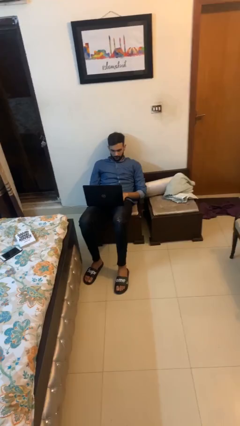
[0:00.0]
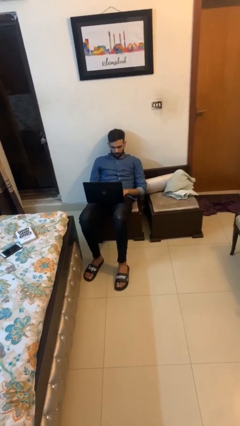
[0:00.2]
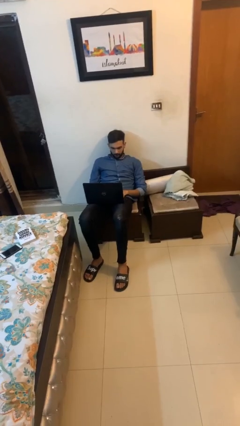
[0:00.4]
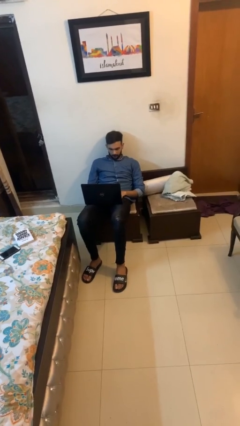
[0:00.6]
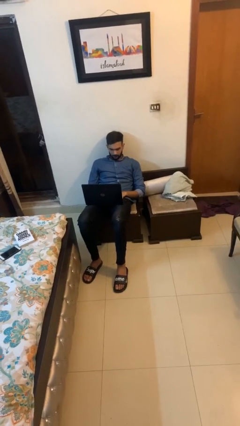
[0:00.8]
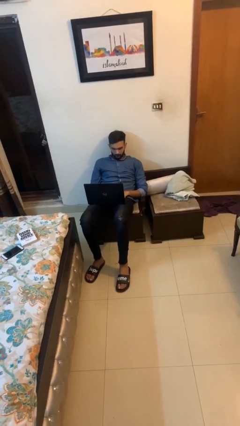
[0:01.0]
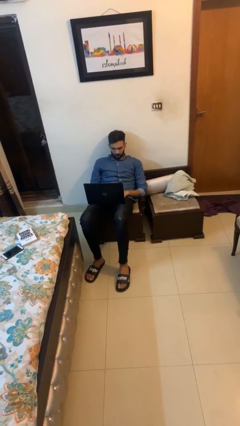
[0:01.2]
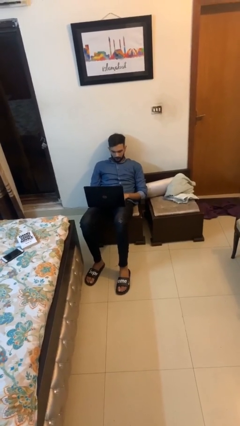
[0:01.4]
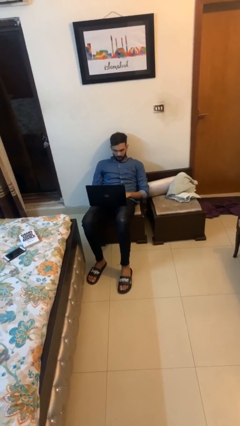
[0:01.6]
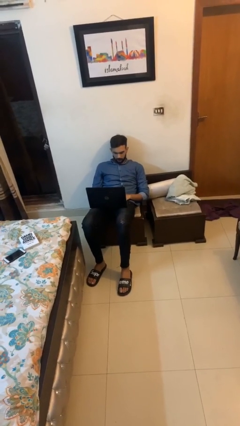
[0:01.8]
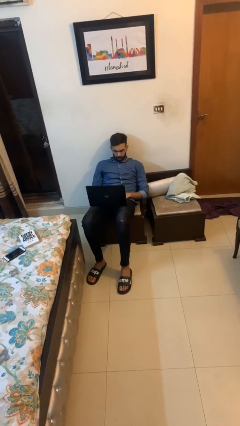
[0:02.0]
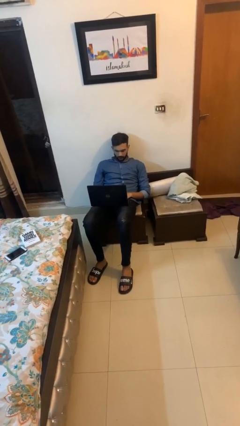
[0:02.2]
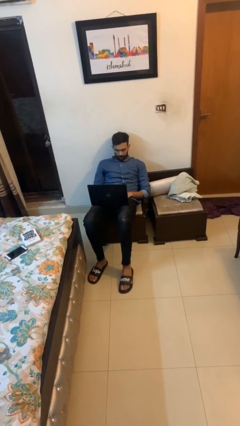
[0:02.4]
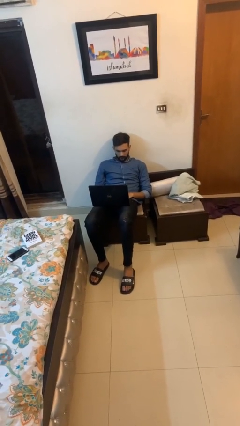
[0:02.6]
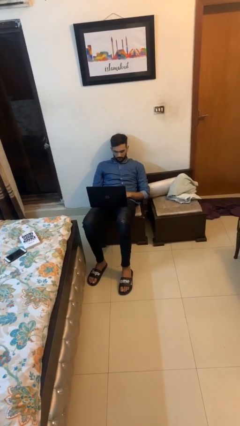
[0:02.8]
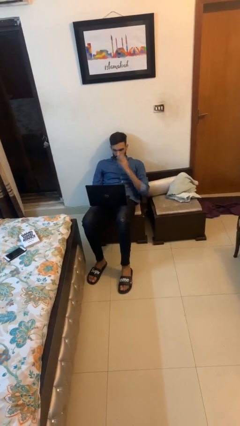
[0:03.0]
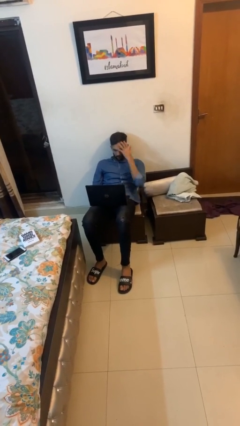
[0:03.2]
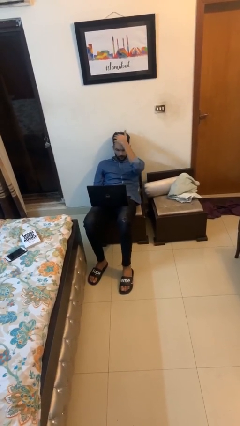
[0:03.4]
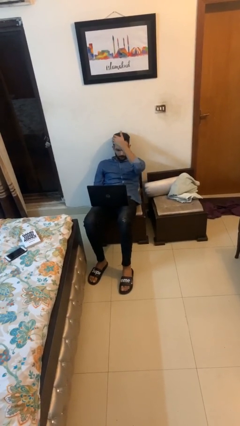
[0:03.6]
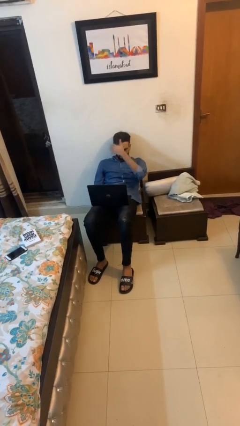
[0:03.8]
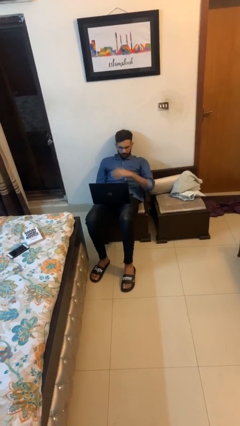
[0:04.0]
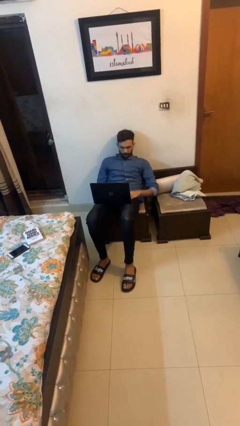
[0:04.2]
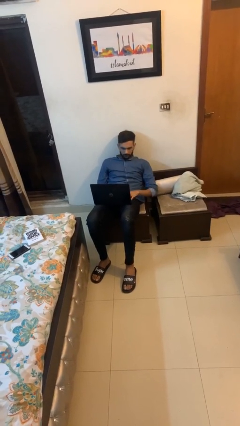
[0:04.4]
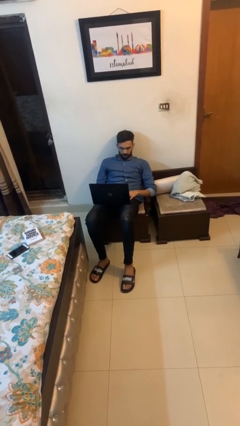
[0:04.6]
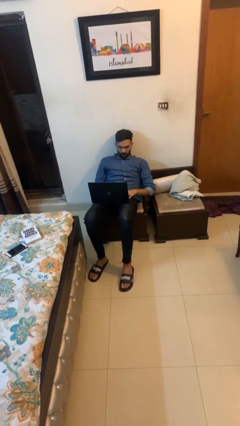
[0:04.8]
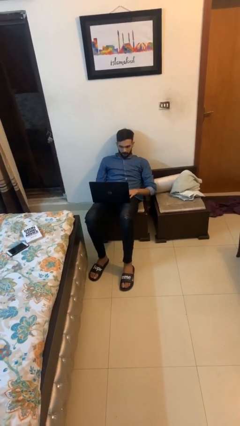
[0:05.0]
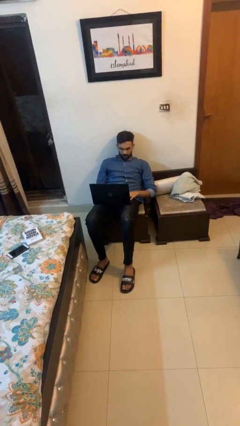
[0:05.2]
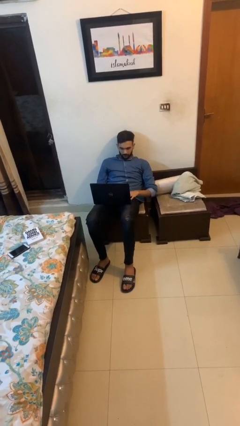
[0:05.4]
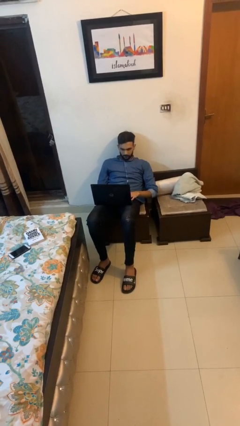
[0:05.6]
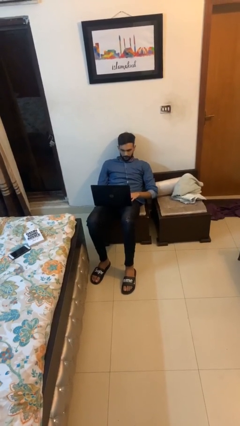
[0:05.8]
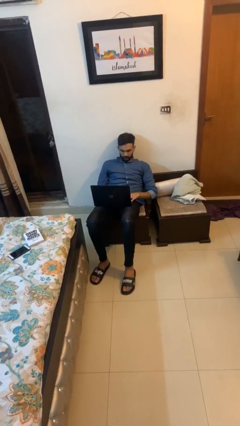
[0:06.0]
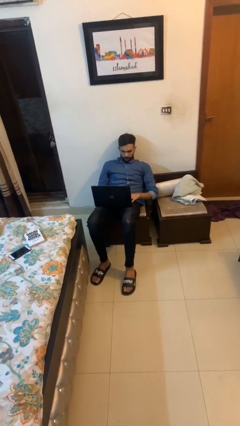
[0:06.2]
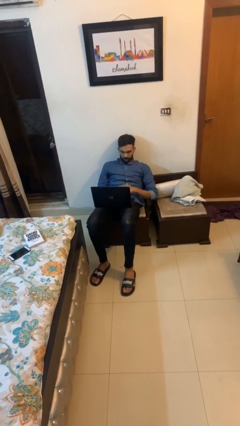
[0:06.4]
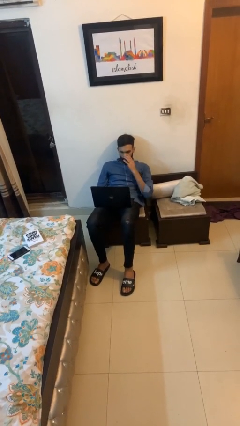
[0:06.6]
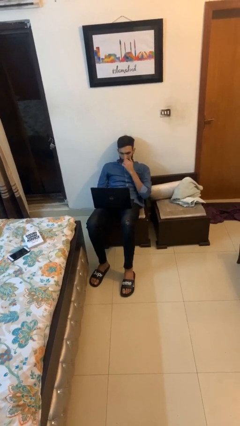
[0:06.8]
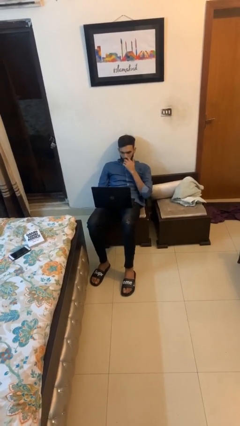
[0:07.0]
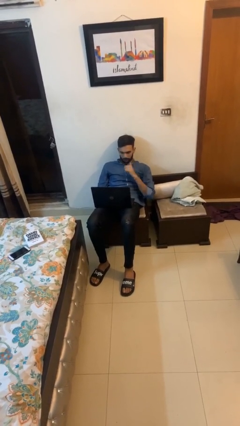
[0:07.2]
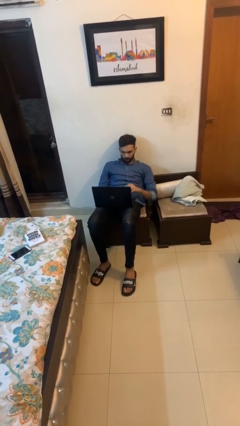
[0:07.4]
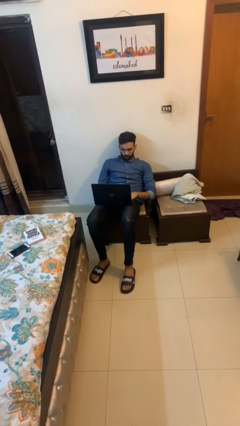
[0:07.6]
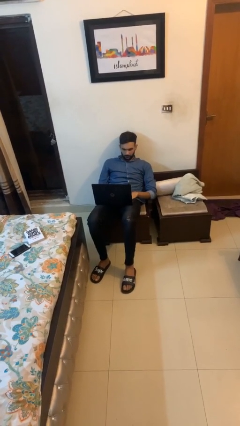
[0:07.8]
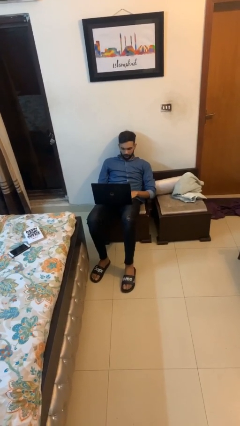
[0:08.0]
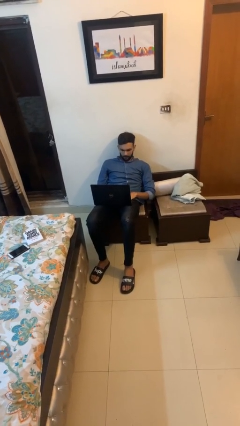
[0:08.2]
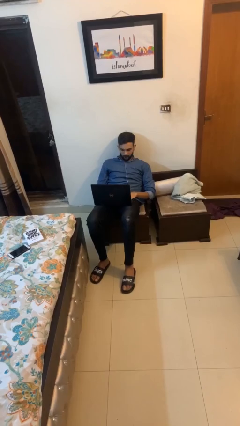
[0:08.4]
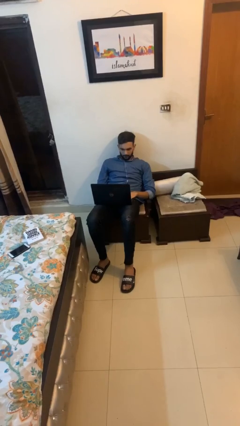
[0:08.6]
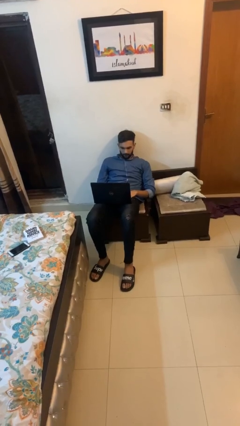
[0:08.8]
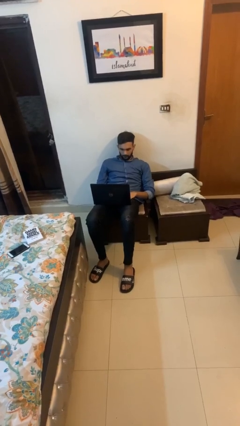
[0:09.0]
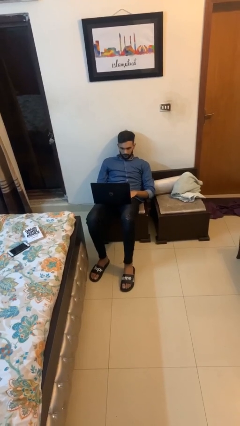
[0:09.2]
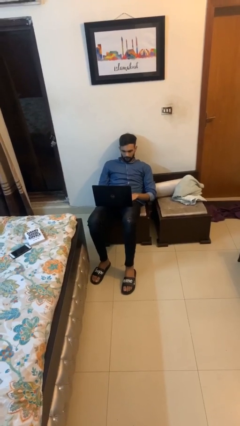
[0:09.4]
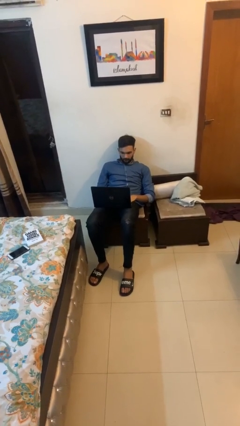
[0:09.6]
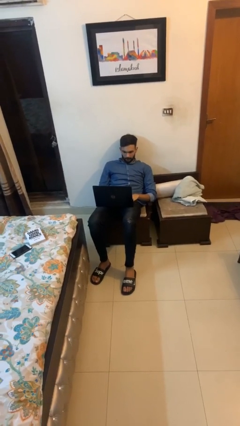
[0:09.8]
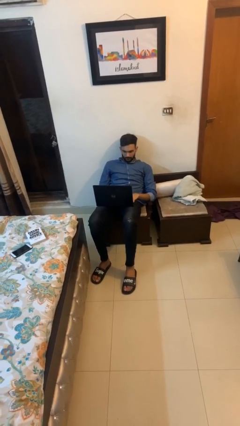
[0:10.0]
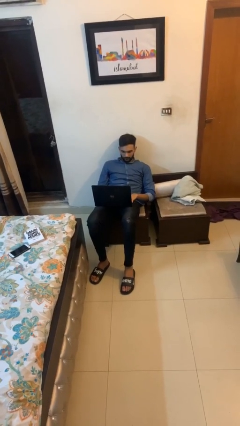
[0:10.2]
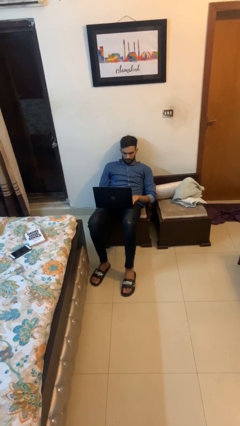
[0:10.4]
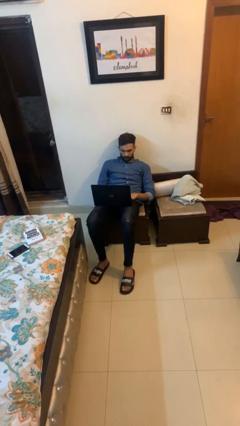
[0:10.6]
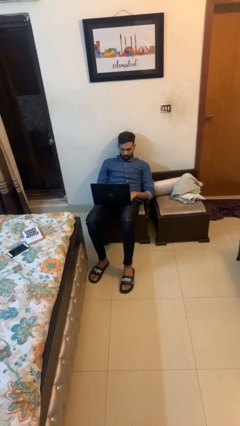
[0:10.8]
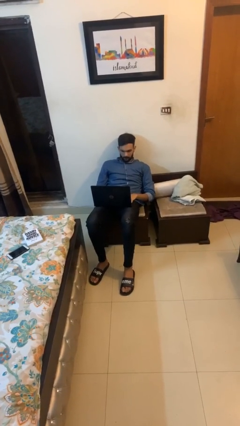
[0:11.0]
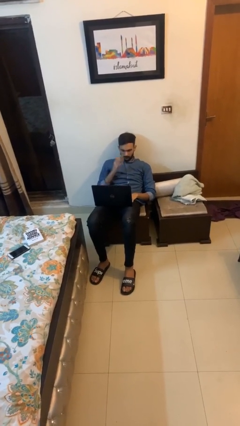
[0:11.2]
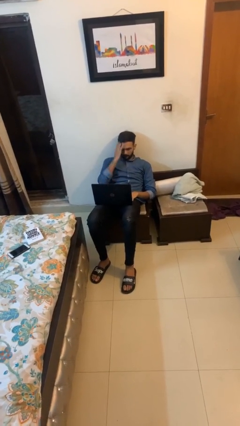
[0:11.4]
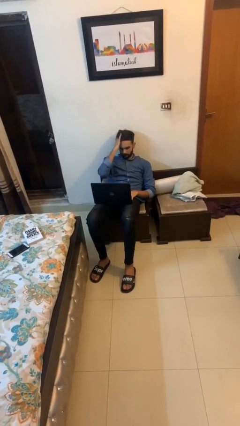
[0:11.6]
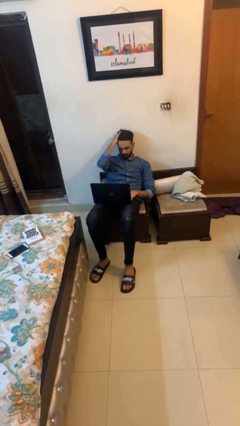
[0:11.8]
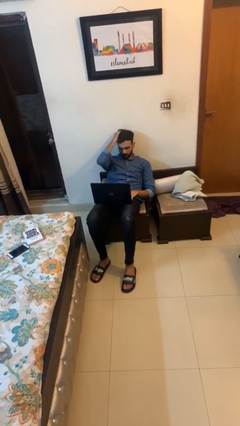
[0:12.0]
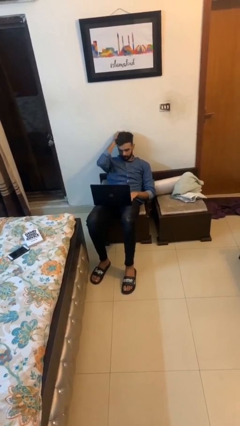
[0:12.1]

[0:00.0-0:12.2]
person interacts with laptop

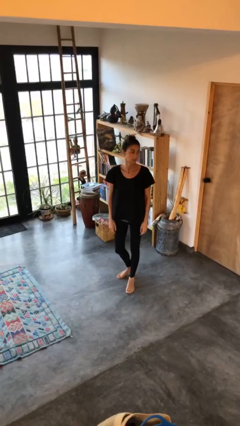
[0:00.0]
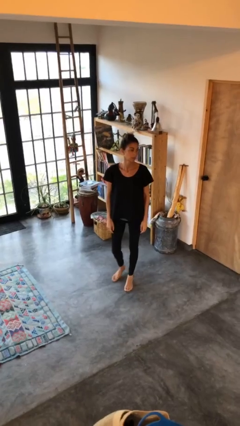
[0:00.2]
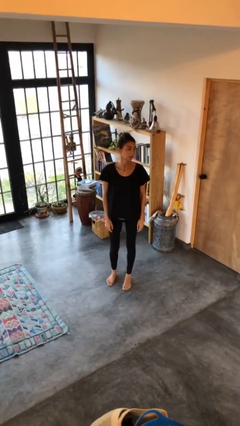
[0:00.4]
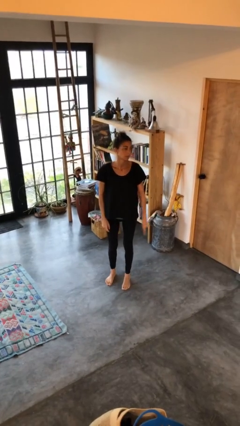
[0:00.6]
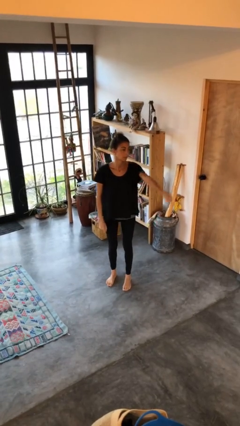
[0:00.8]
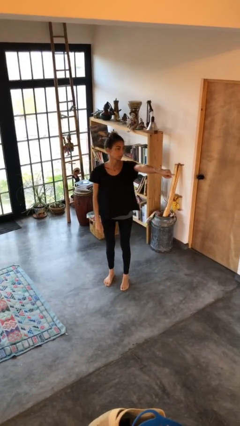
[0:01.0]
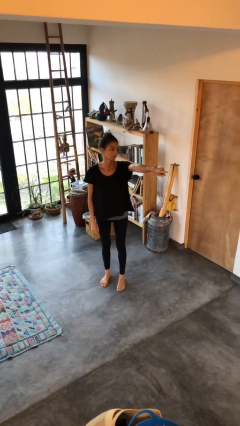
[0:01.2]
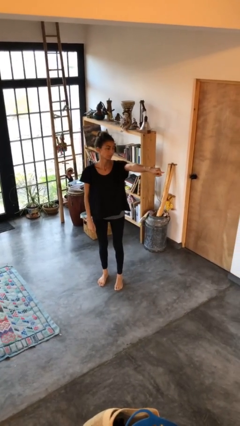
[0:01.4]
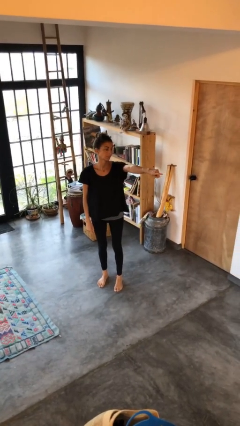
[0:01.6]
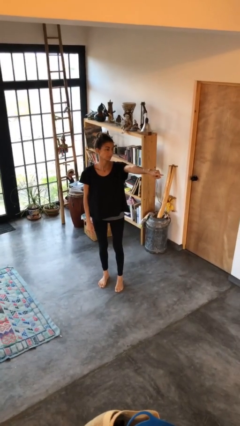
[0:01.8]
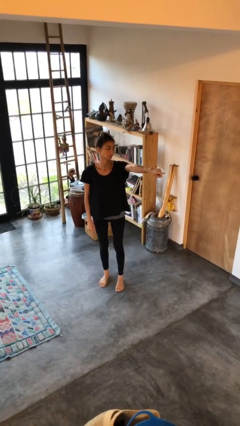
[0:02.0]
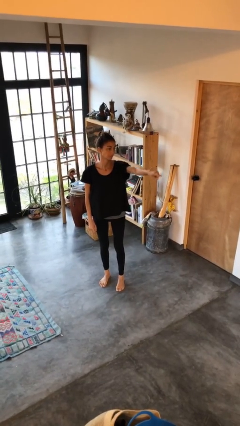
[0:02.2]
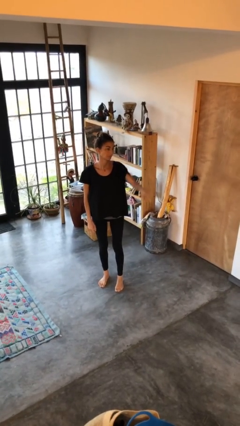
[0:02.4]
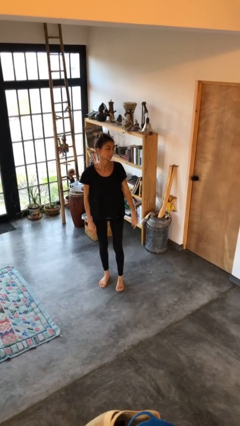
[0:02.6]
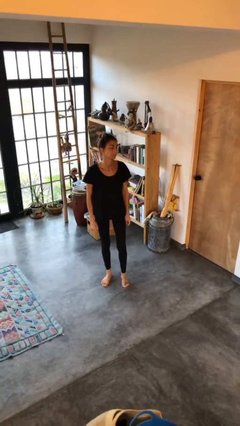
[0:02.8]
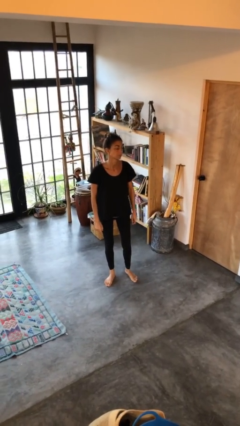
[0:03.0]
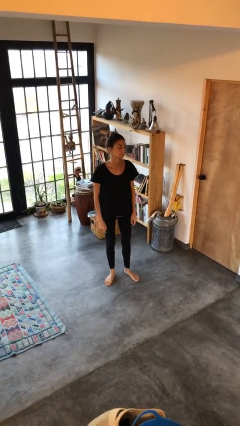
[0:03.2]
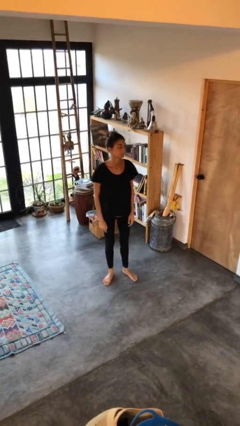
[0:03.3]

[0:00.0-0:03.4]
person points at person

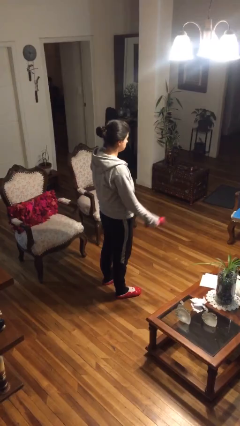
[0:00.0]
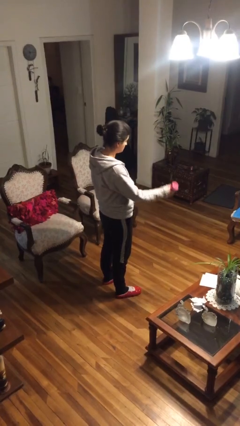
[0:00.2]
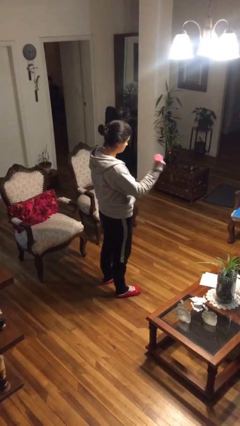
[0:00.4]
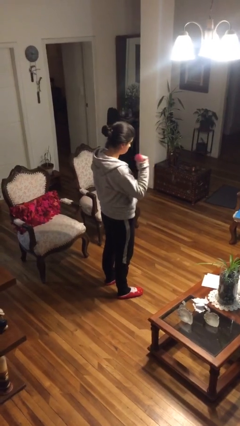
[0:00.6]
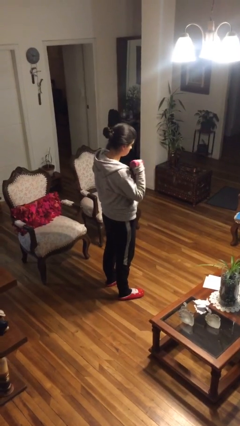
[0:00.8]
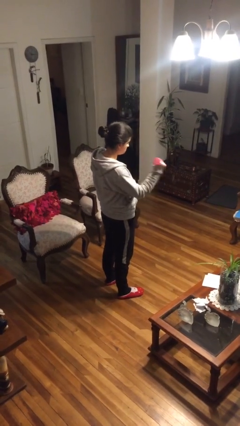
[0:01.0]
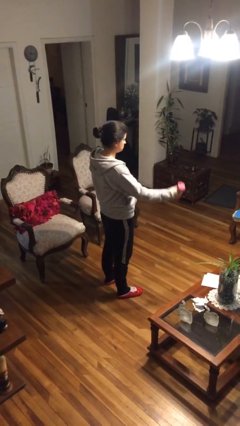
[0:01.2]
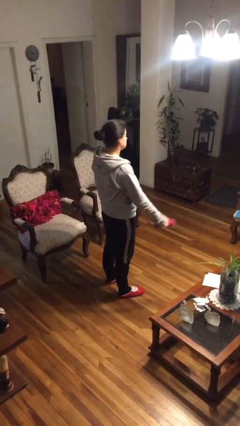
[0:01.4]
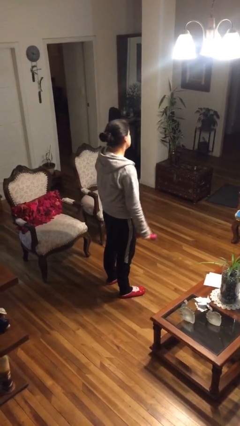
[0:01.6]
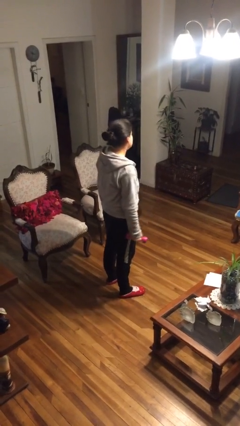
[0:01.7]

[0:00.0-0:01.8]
person lifts dumbbells

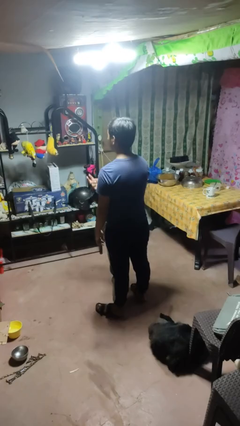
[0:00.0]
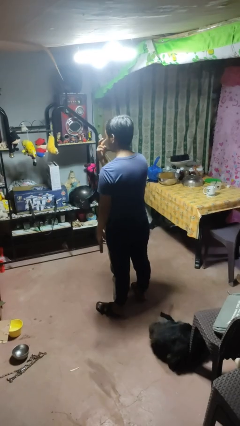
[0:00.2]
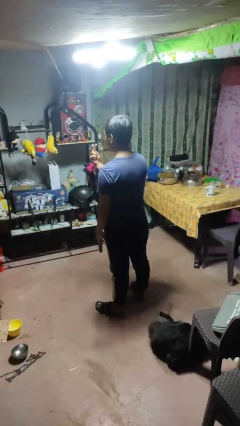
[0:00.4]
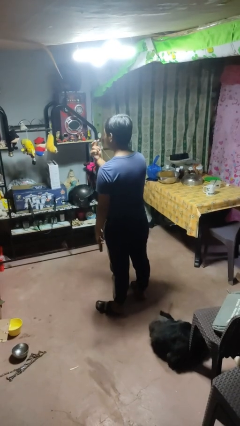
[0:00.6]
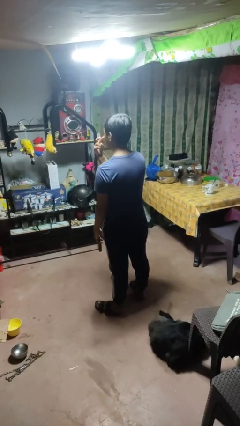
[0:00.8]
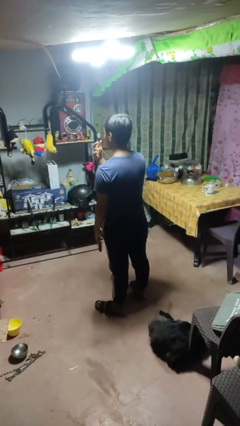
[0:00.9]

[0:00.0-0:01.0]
person gestures watch closely
